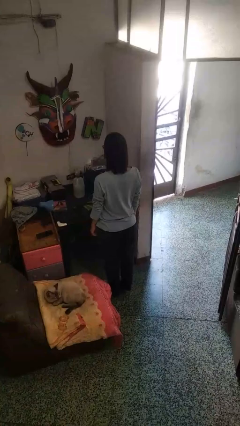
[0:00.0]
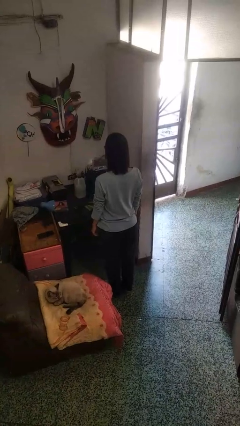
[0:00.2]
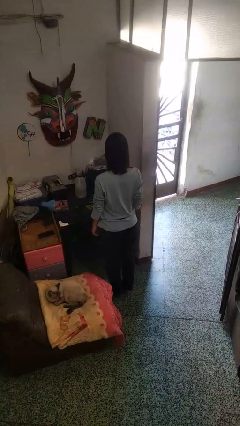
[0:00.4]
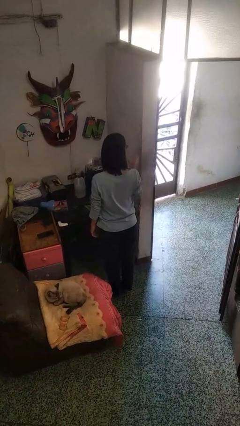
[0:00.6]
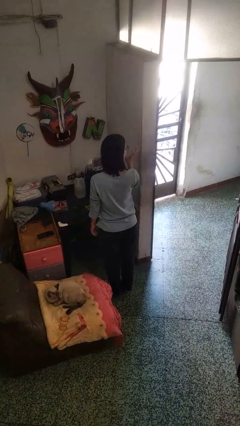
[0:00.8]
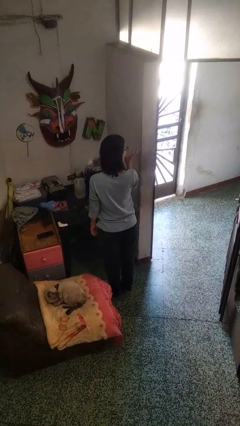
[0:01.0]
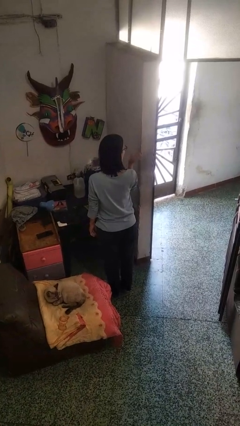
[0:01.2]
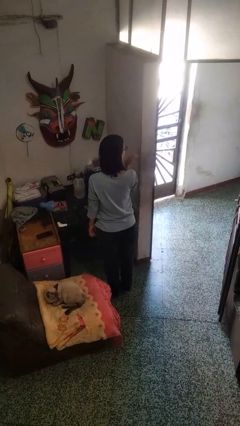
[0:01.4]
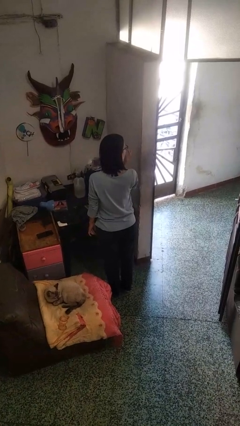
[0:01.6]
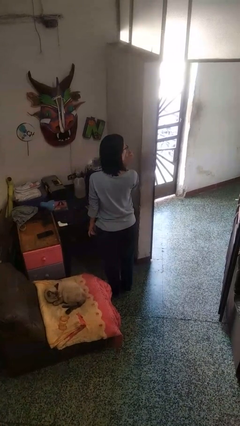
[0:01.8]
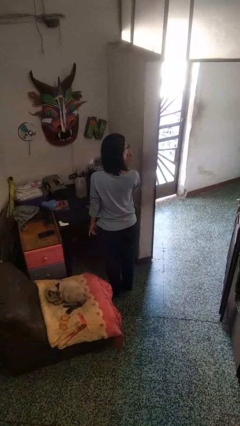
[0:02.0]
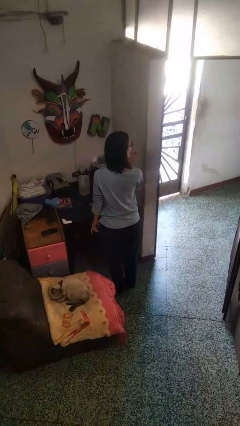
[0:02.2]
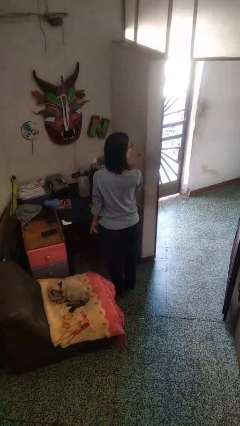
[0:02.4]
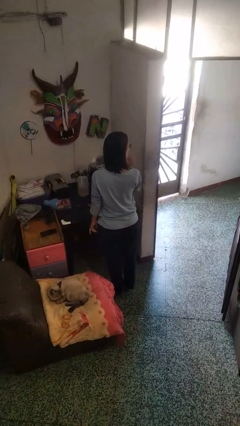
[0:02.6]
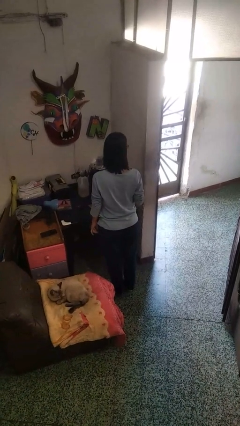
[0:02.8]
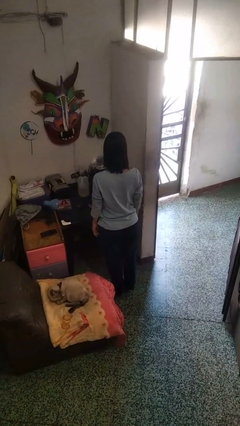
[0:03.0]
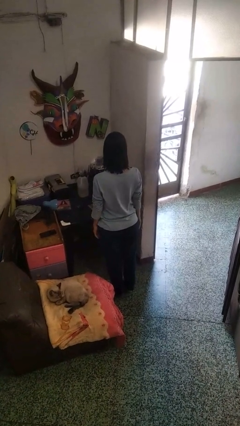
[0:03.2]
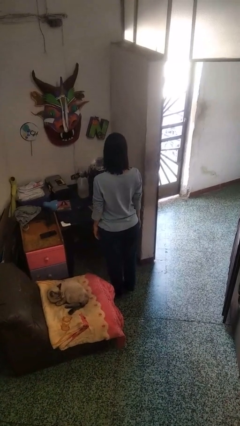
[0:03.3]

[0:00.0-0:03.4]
person licks fingers

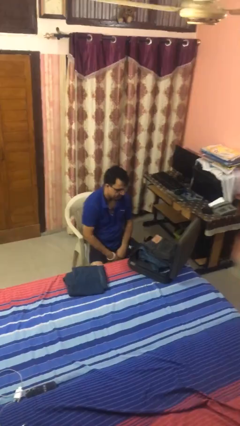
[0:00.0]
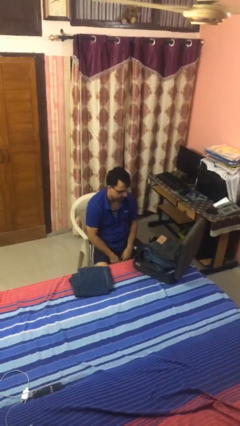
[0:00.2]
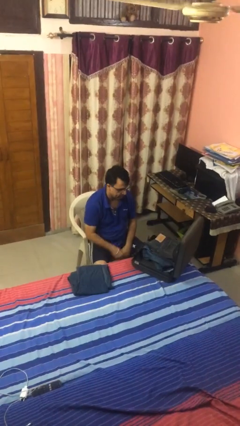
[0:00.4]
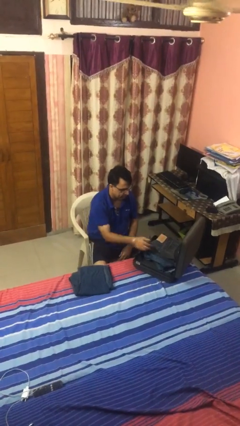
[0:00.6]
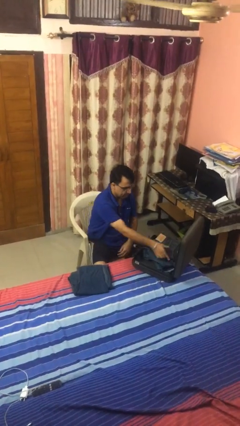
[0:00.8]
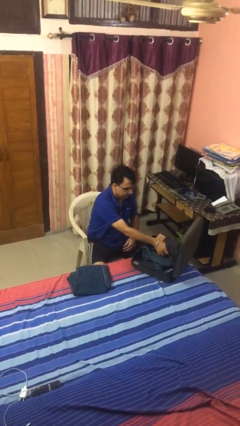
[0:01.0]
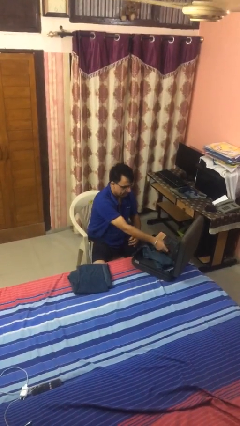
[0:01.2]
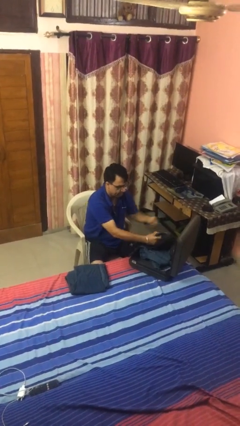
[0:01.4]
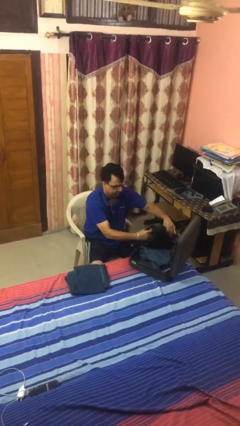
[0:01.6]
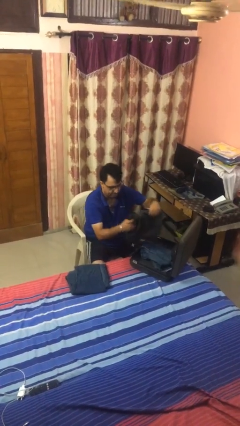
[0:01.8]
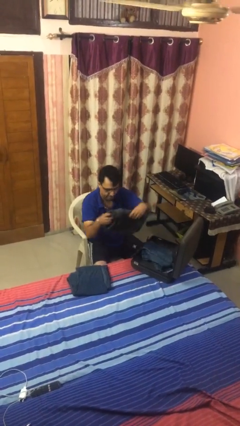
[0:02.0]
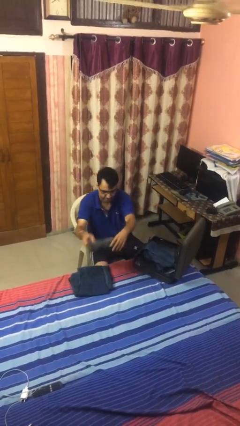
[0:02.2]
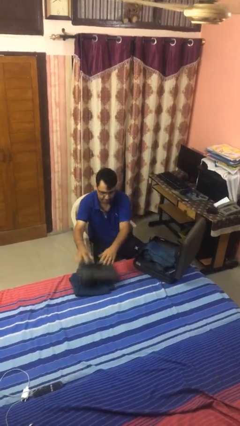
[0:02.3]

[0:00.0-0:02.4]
person unloads clothes from suitcase

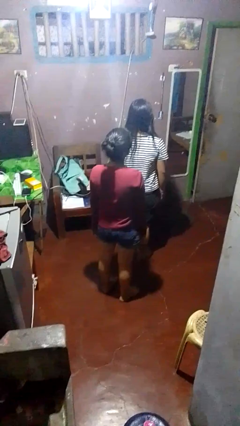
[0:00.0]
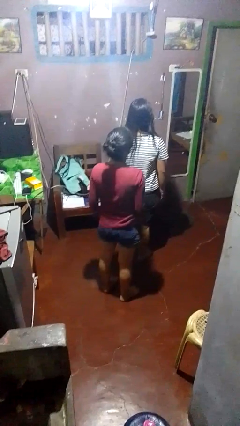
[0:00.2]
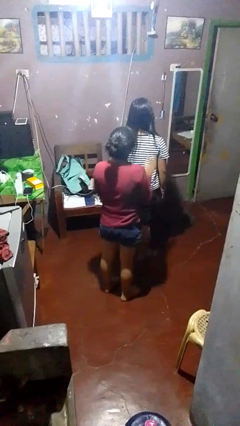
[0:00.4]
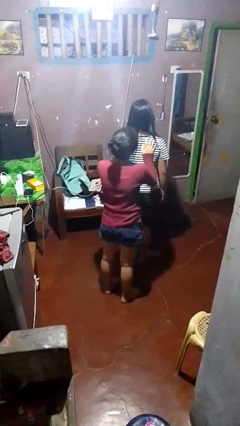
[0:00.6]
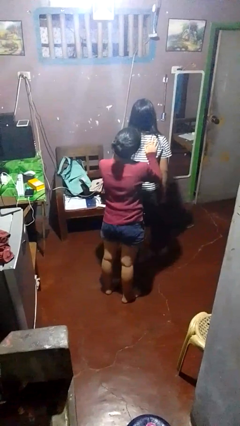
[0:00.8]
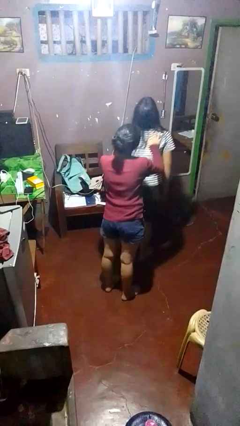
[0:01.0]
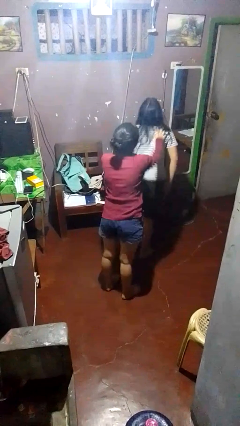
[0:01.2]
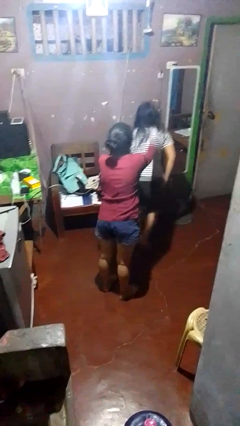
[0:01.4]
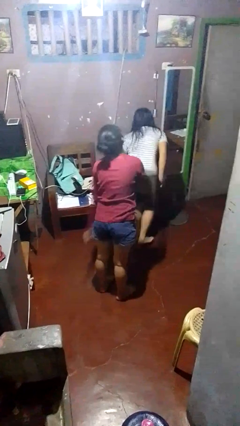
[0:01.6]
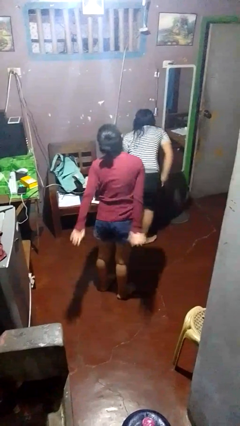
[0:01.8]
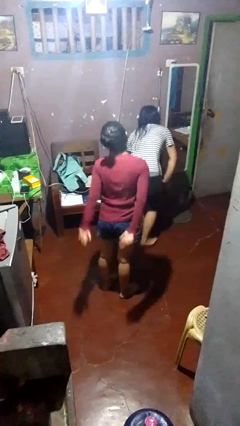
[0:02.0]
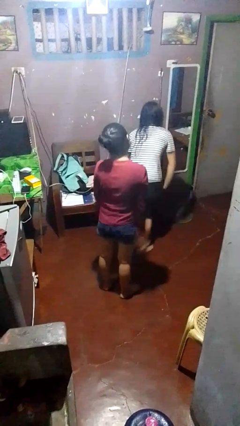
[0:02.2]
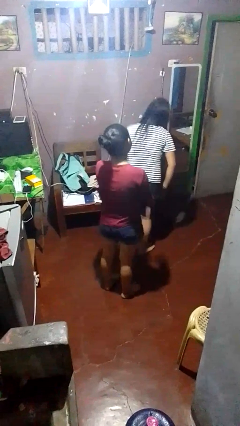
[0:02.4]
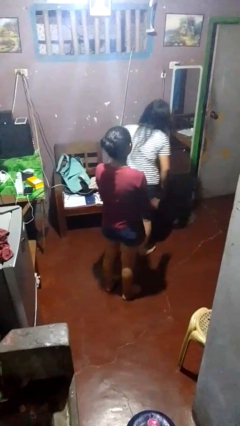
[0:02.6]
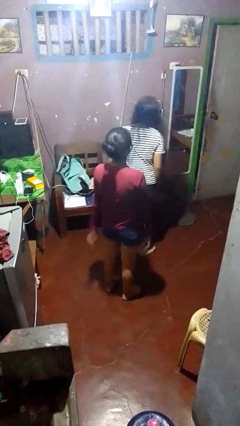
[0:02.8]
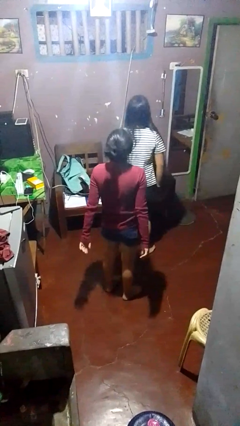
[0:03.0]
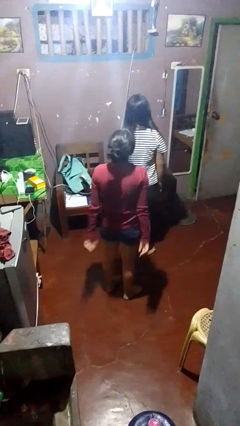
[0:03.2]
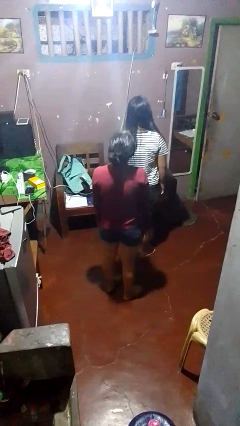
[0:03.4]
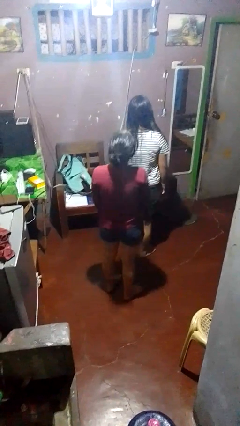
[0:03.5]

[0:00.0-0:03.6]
person shoves person

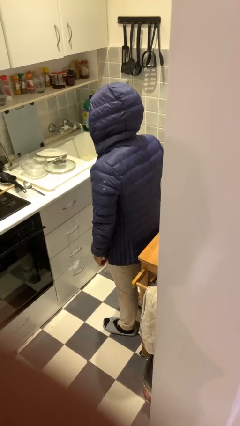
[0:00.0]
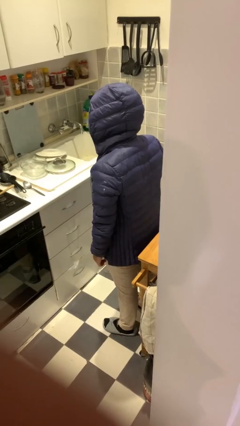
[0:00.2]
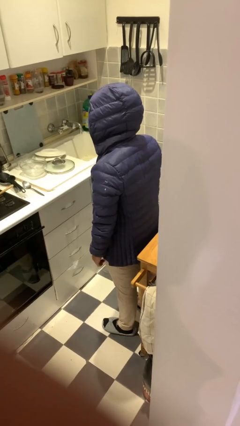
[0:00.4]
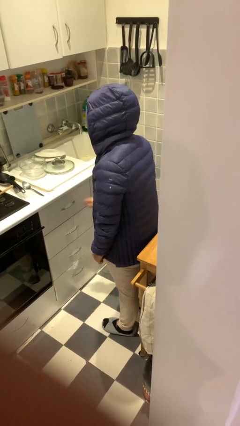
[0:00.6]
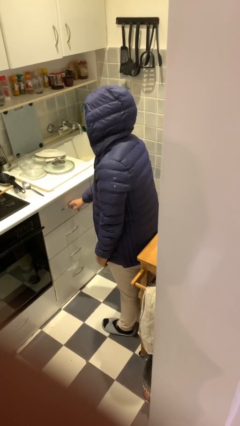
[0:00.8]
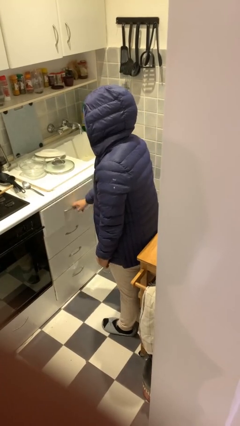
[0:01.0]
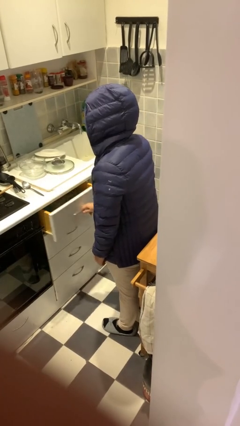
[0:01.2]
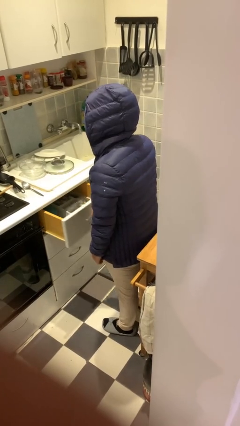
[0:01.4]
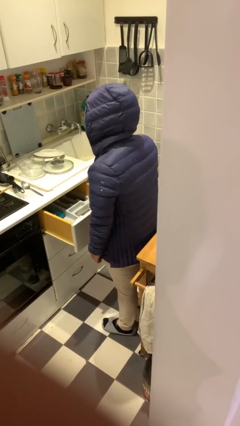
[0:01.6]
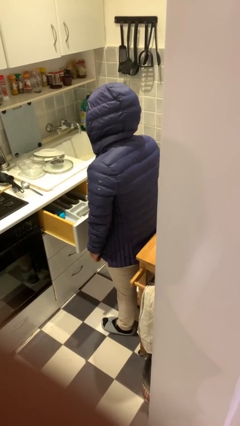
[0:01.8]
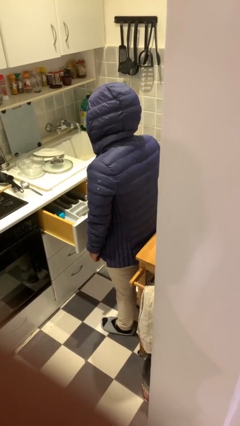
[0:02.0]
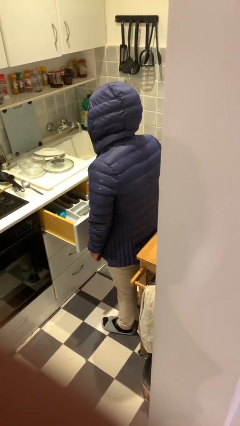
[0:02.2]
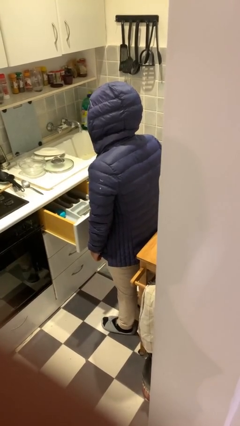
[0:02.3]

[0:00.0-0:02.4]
person opens kitchen drawer

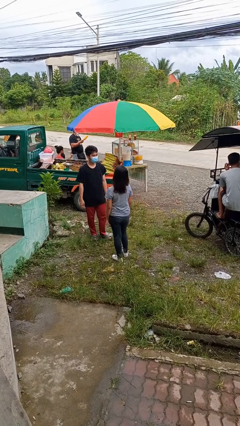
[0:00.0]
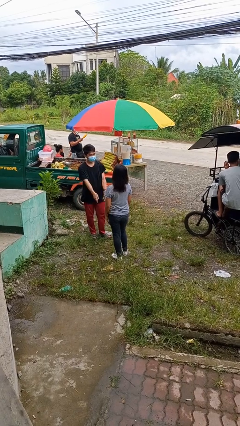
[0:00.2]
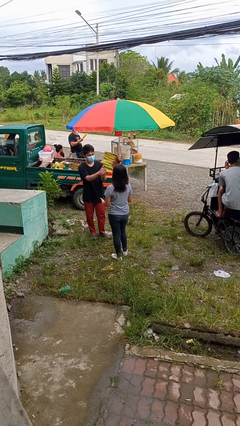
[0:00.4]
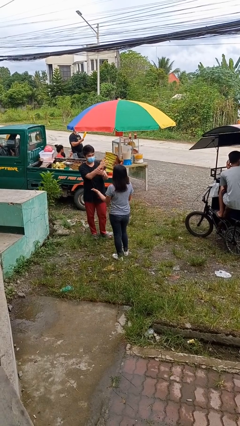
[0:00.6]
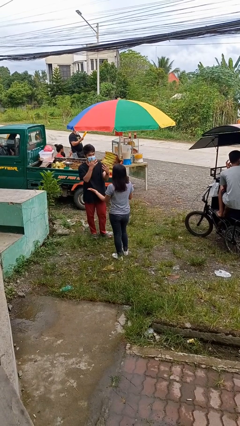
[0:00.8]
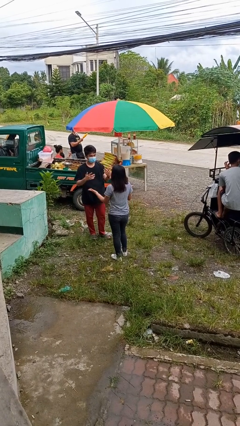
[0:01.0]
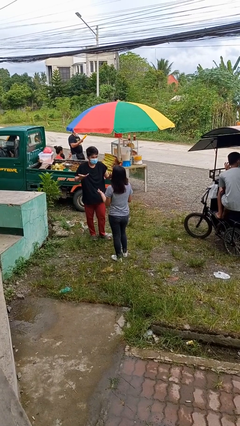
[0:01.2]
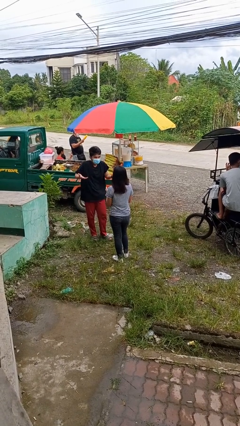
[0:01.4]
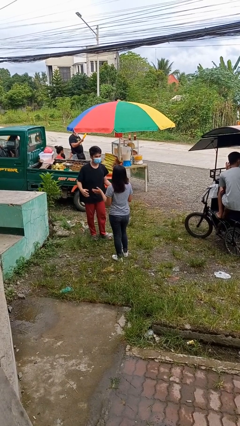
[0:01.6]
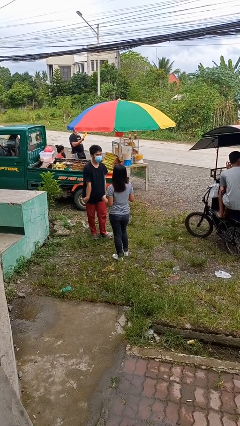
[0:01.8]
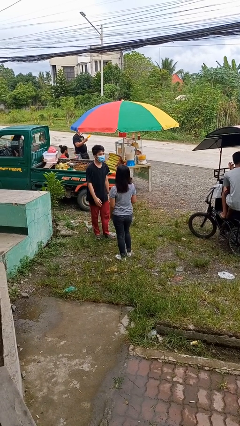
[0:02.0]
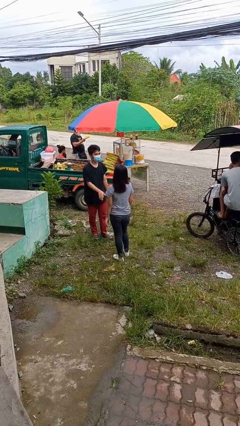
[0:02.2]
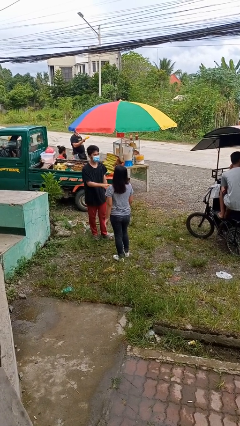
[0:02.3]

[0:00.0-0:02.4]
person talks to person

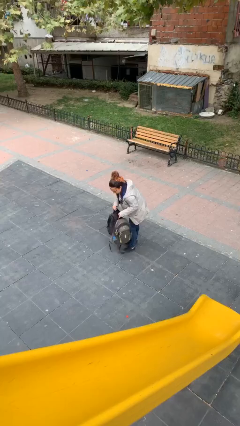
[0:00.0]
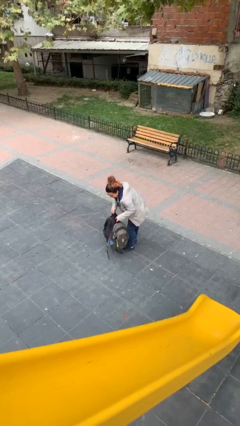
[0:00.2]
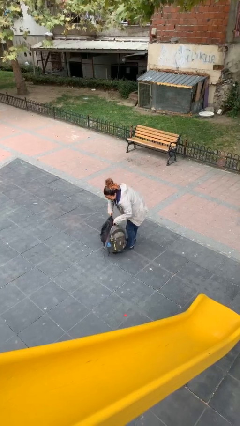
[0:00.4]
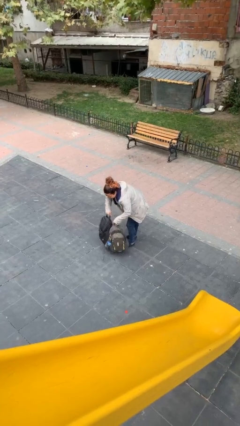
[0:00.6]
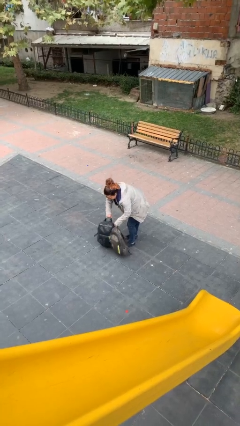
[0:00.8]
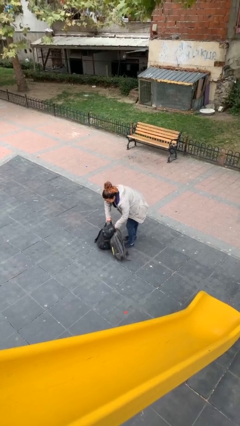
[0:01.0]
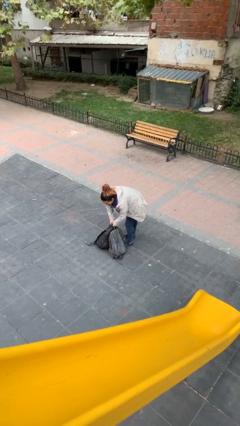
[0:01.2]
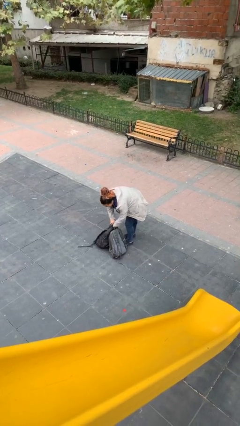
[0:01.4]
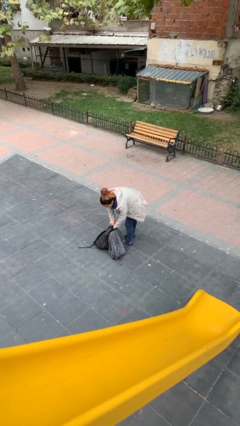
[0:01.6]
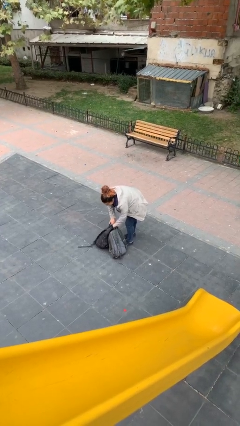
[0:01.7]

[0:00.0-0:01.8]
person puts down object on floor

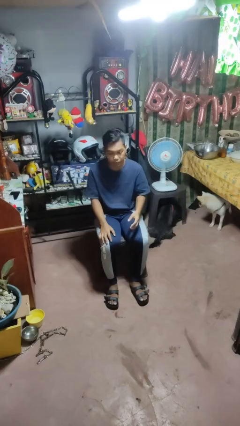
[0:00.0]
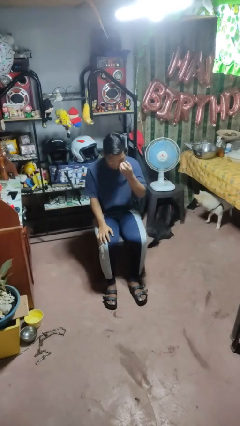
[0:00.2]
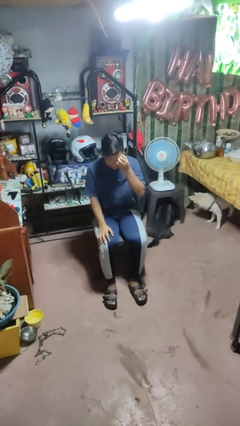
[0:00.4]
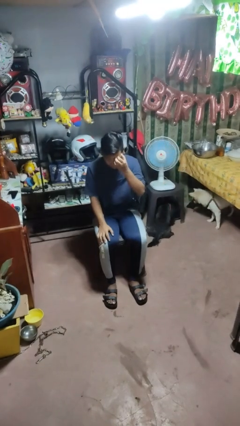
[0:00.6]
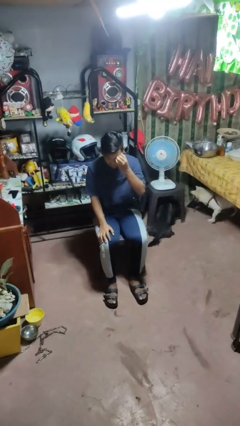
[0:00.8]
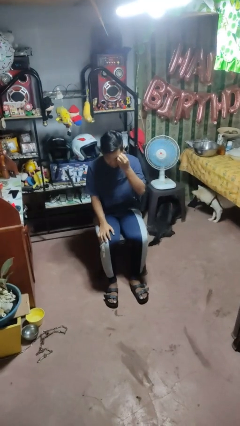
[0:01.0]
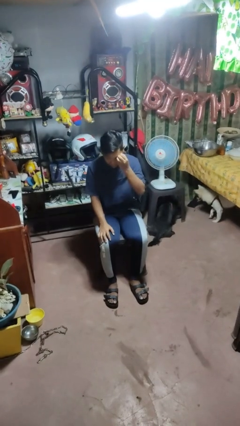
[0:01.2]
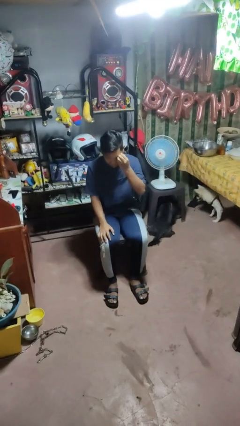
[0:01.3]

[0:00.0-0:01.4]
person scratches face
